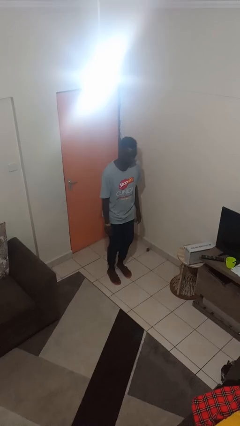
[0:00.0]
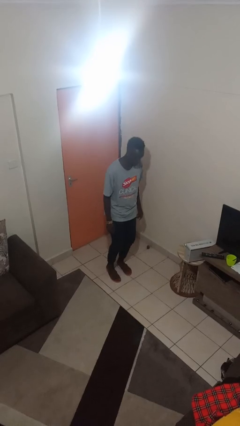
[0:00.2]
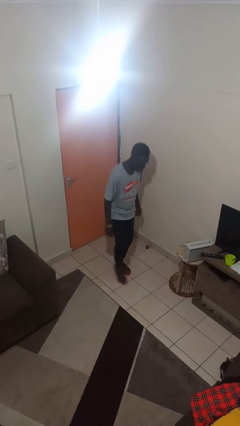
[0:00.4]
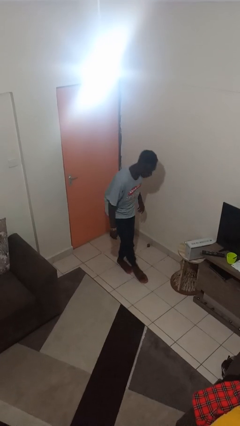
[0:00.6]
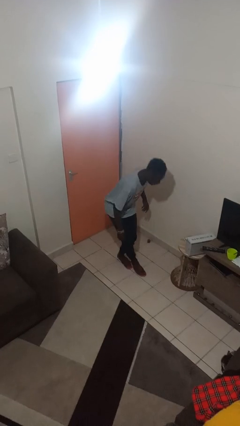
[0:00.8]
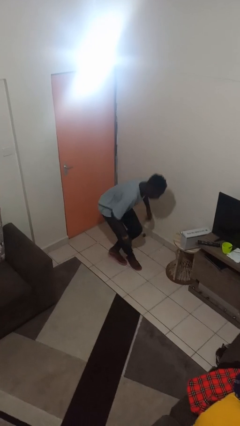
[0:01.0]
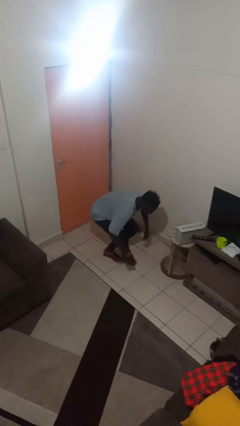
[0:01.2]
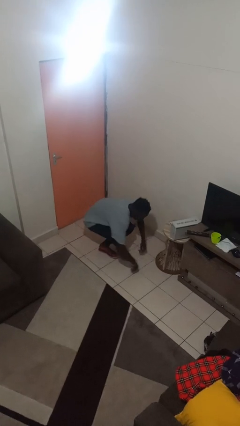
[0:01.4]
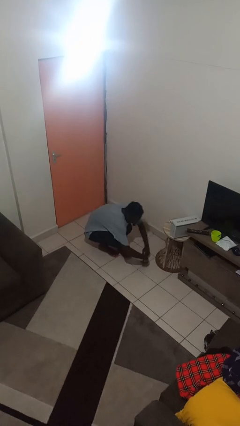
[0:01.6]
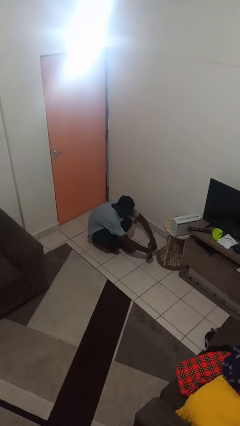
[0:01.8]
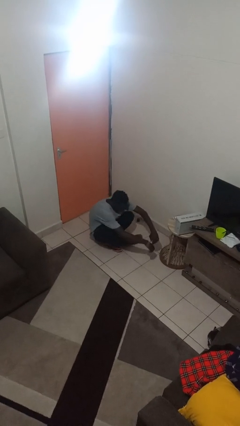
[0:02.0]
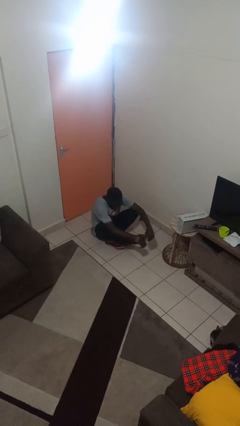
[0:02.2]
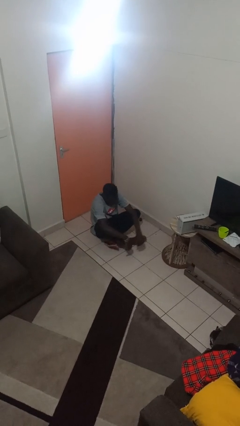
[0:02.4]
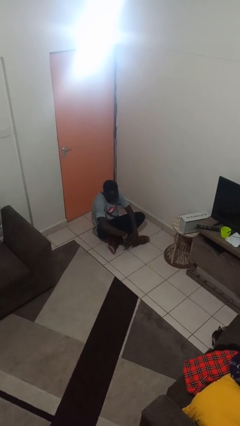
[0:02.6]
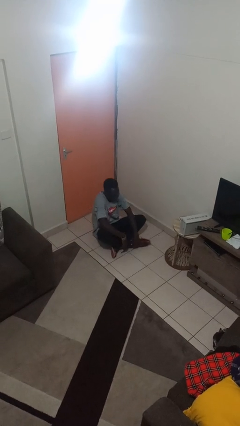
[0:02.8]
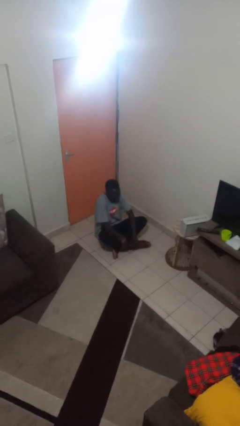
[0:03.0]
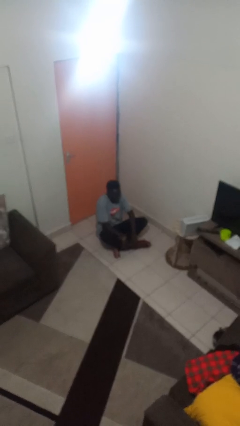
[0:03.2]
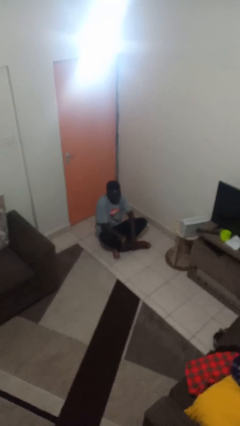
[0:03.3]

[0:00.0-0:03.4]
person sits crisscross

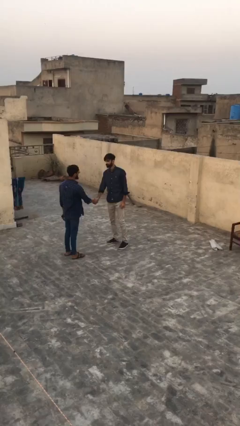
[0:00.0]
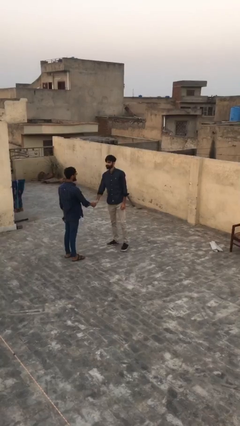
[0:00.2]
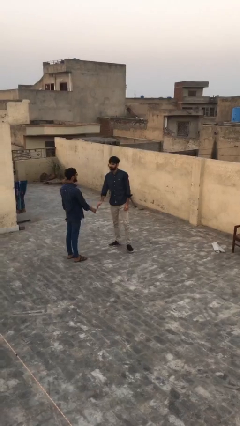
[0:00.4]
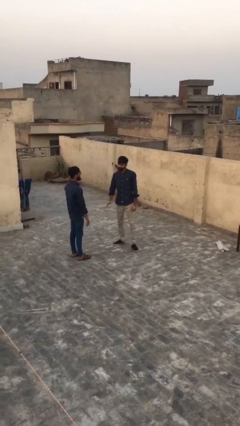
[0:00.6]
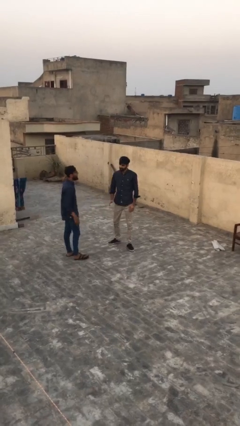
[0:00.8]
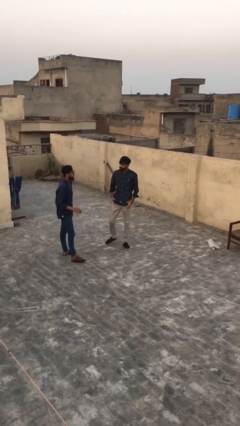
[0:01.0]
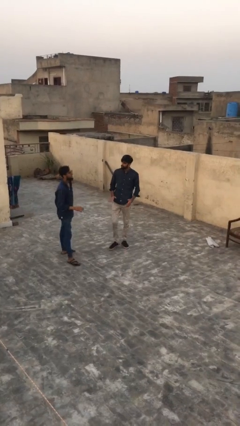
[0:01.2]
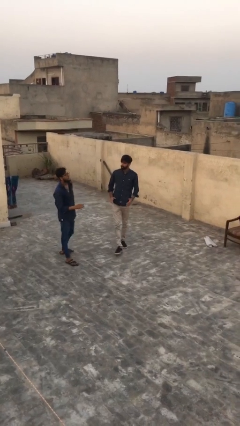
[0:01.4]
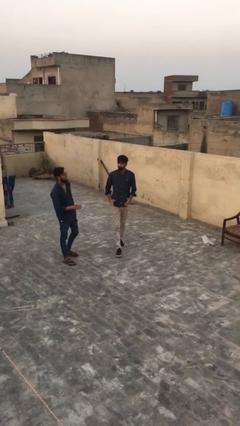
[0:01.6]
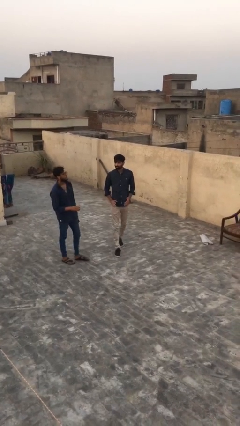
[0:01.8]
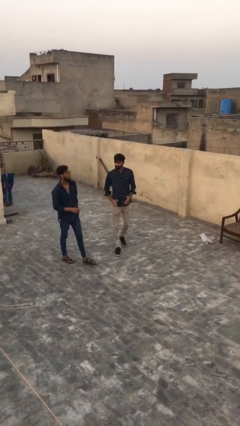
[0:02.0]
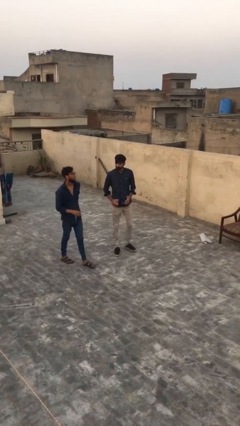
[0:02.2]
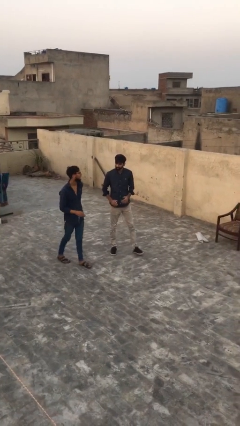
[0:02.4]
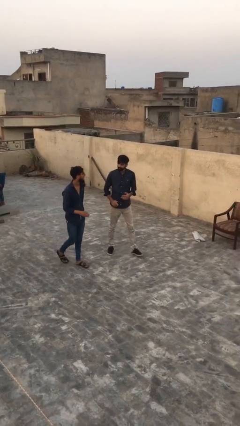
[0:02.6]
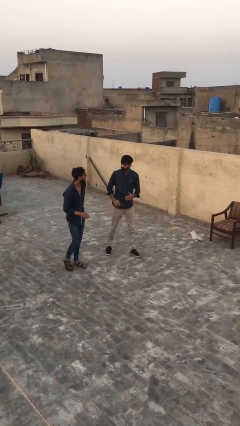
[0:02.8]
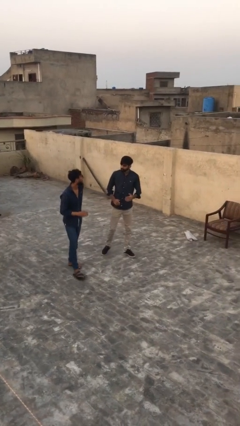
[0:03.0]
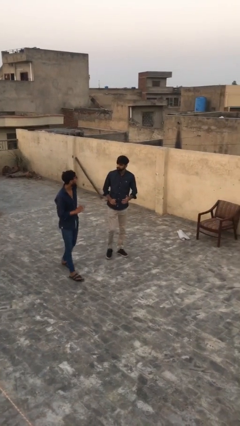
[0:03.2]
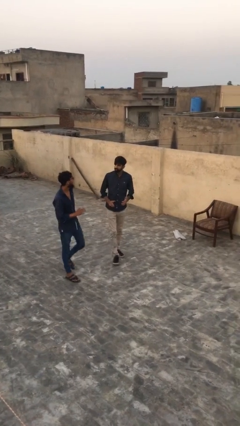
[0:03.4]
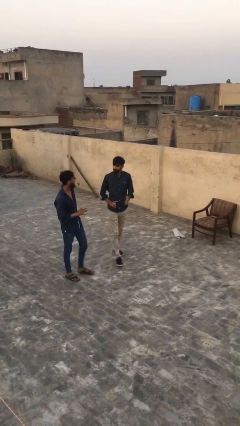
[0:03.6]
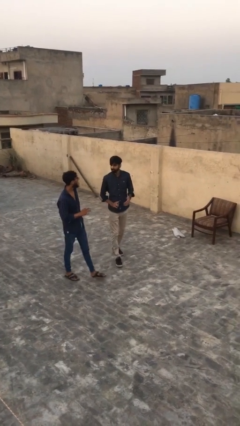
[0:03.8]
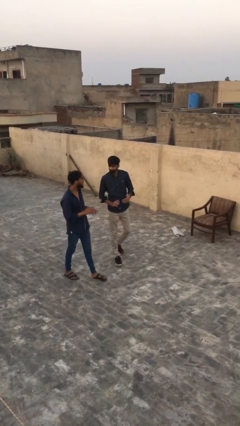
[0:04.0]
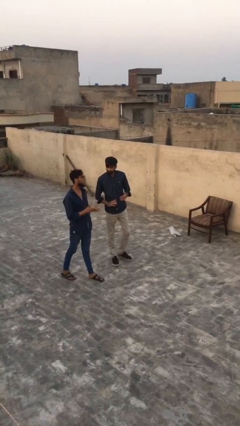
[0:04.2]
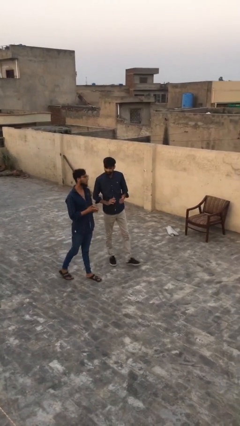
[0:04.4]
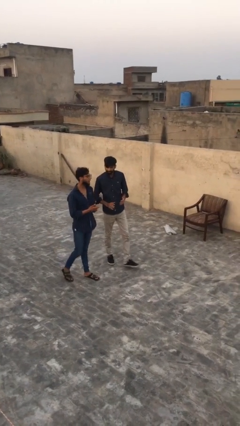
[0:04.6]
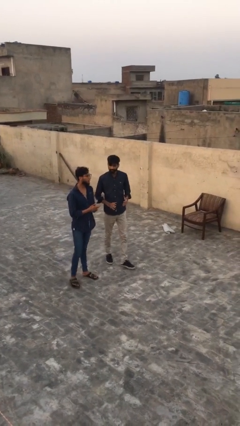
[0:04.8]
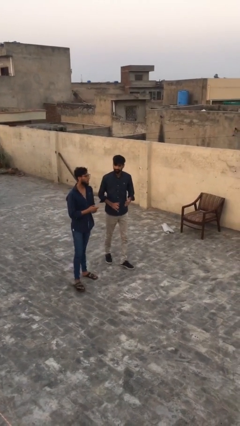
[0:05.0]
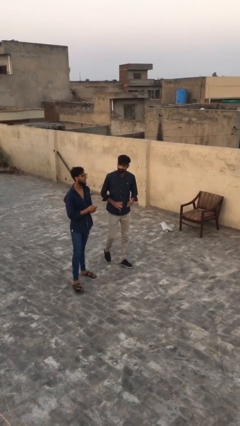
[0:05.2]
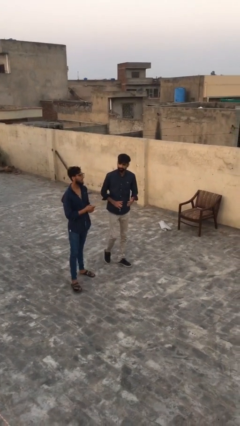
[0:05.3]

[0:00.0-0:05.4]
person talks to person

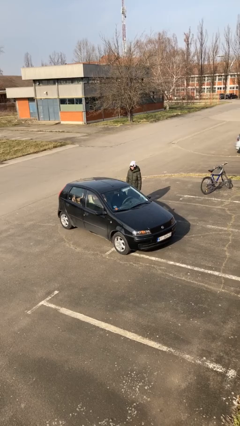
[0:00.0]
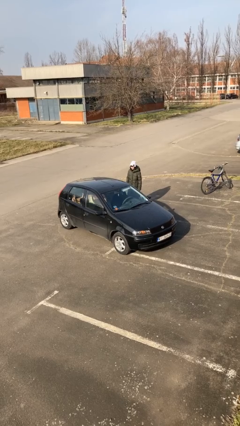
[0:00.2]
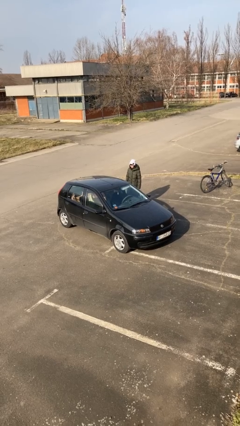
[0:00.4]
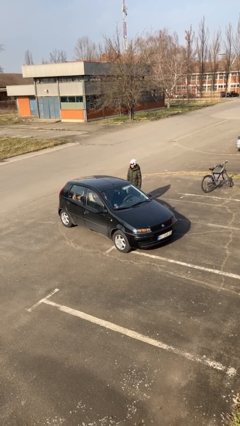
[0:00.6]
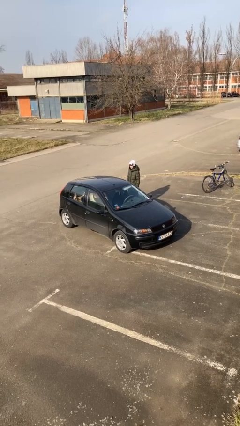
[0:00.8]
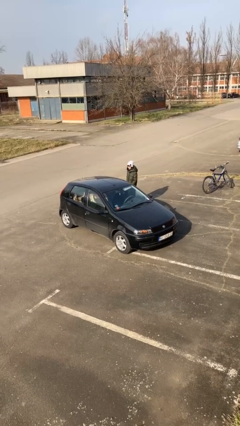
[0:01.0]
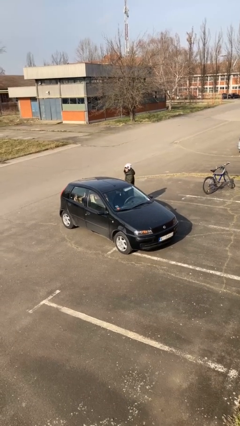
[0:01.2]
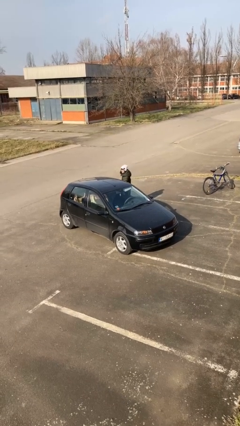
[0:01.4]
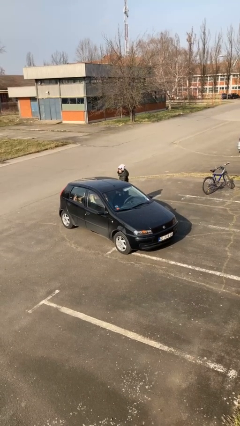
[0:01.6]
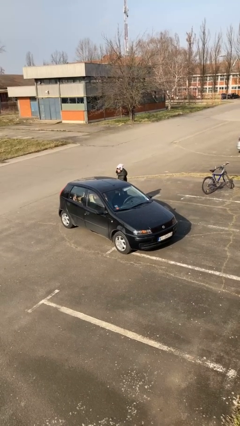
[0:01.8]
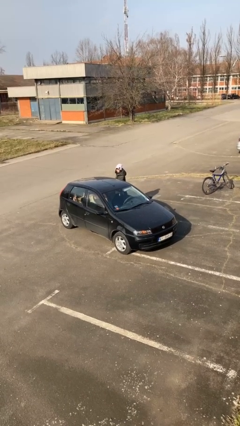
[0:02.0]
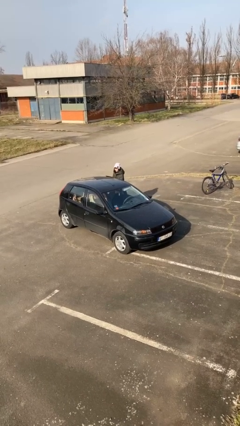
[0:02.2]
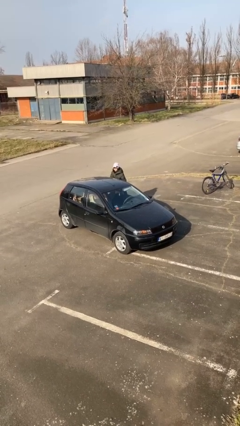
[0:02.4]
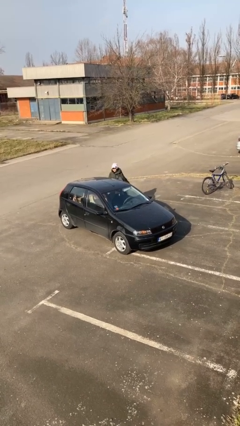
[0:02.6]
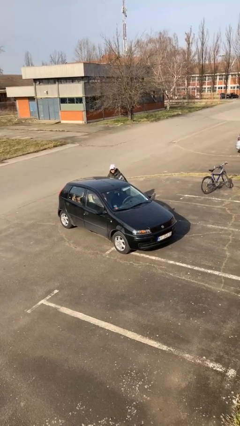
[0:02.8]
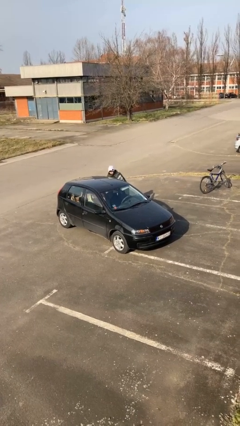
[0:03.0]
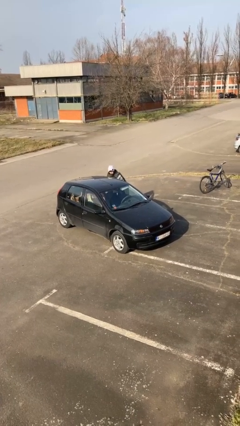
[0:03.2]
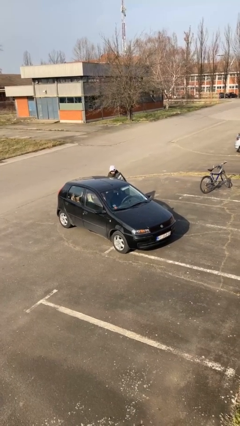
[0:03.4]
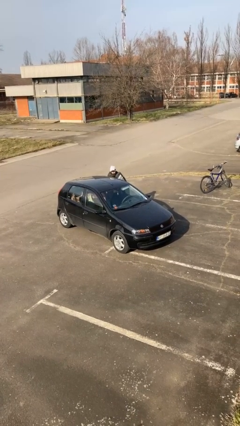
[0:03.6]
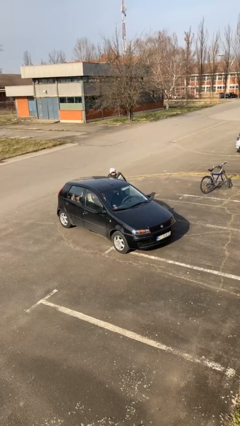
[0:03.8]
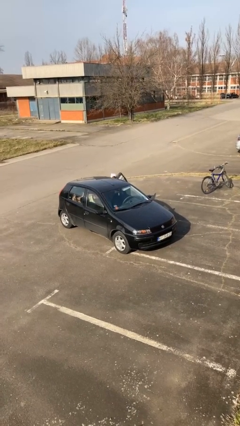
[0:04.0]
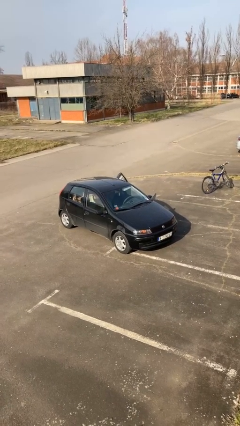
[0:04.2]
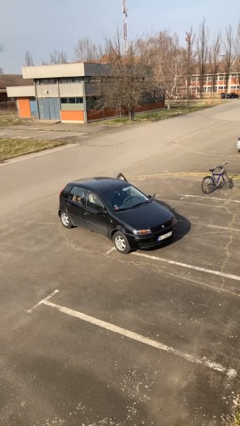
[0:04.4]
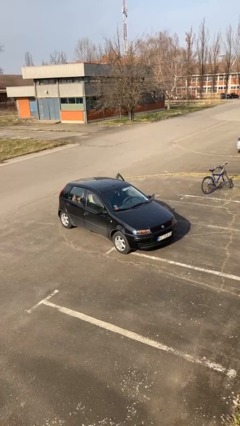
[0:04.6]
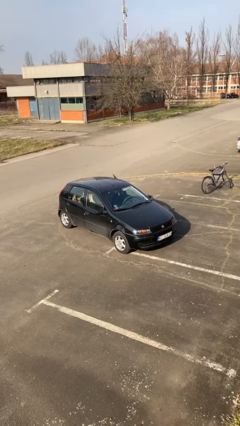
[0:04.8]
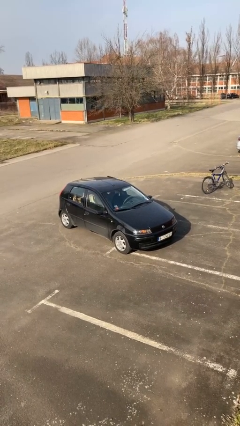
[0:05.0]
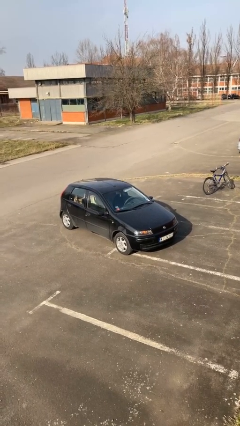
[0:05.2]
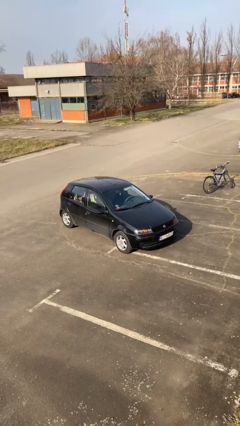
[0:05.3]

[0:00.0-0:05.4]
car picks up person

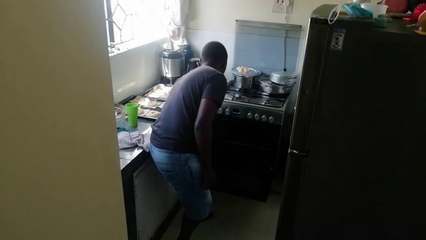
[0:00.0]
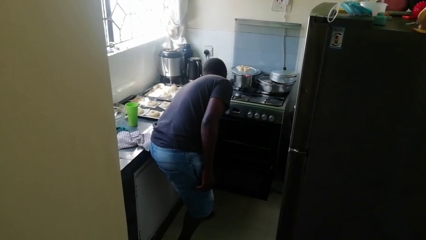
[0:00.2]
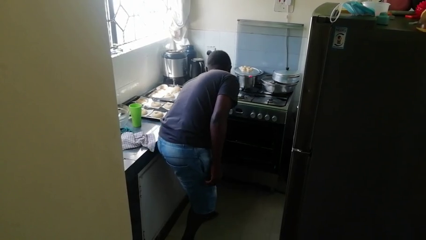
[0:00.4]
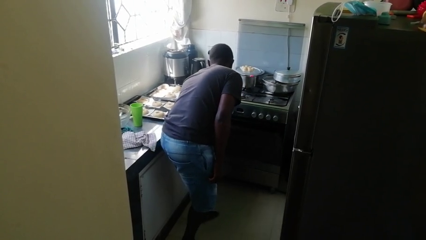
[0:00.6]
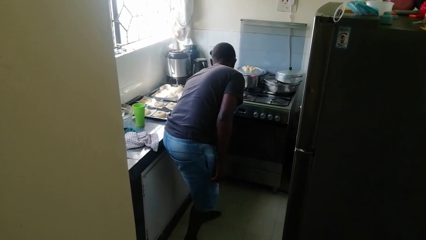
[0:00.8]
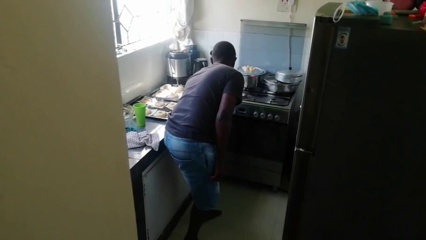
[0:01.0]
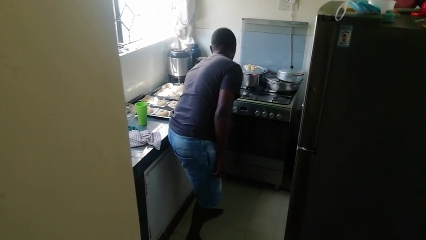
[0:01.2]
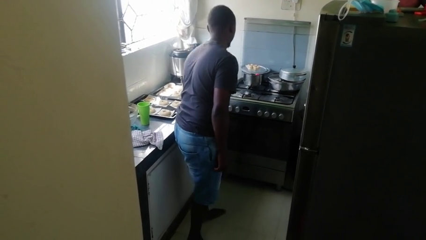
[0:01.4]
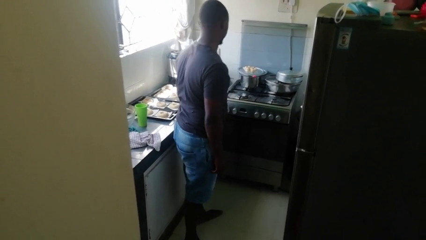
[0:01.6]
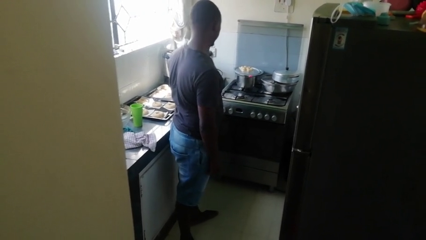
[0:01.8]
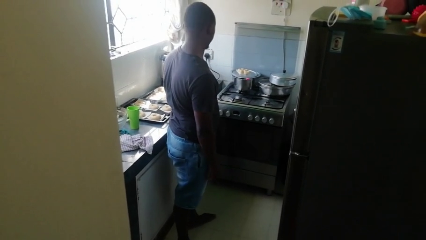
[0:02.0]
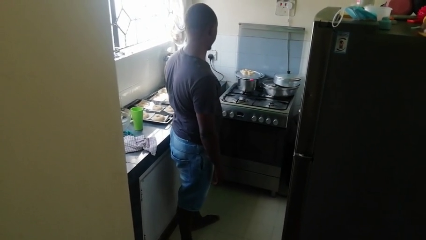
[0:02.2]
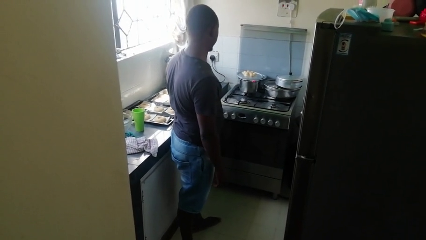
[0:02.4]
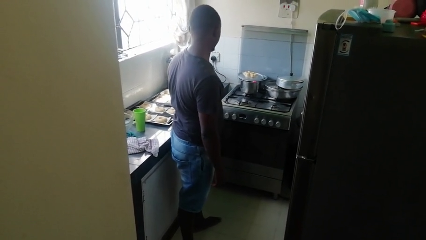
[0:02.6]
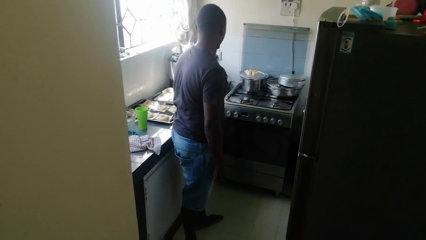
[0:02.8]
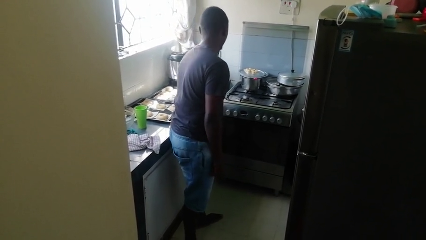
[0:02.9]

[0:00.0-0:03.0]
person closes oven door

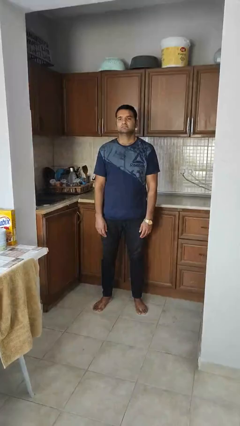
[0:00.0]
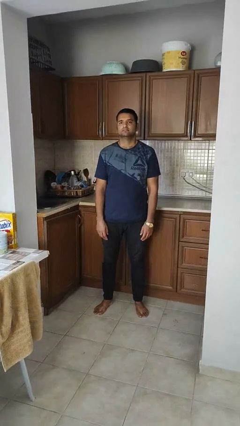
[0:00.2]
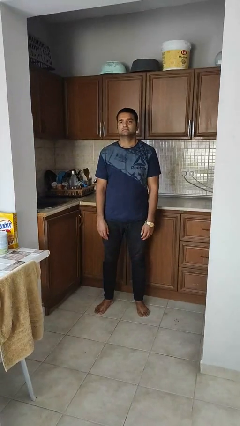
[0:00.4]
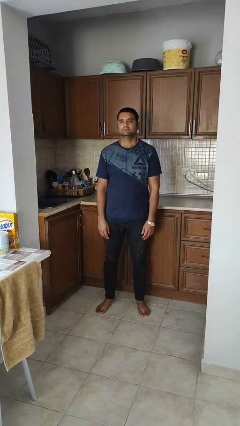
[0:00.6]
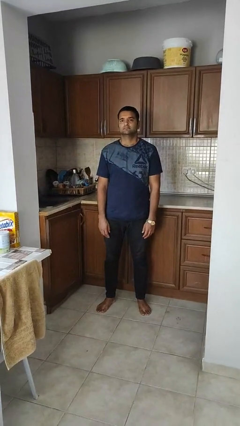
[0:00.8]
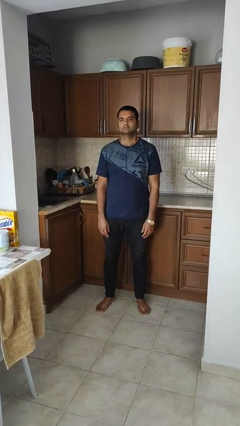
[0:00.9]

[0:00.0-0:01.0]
person looks at wristwatch
